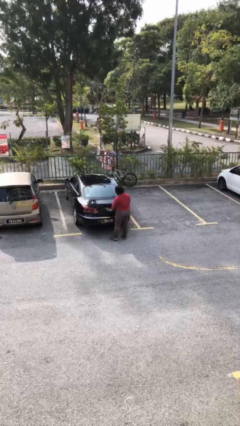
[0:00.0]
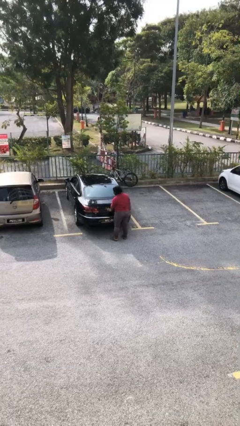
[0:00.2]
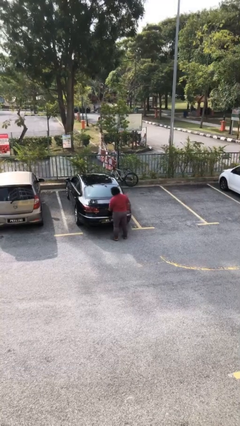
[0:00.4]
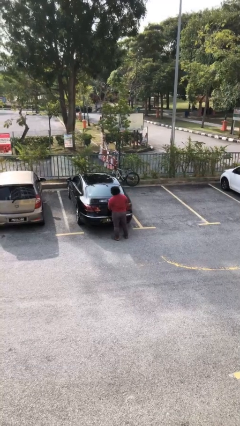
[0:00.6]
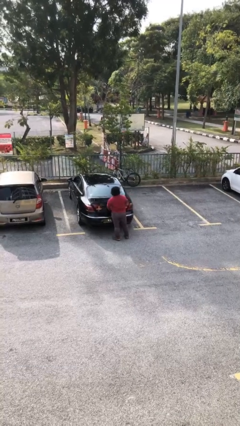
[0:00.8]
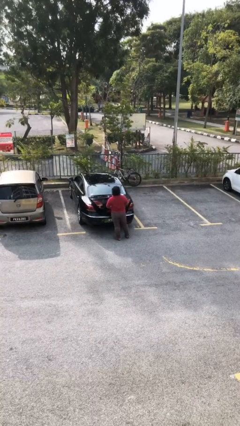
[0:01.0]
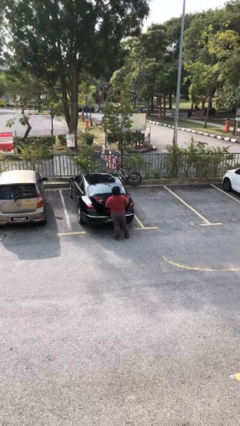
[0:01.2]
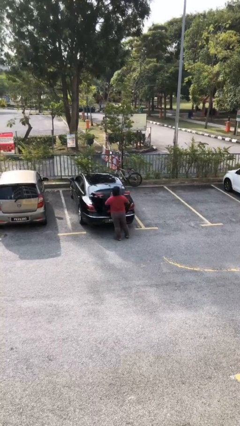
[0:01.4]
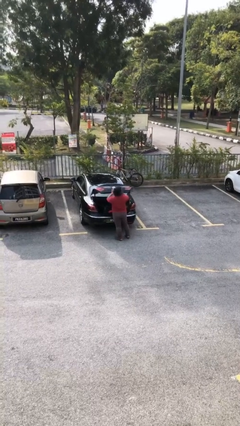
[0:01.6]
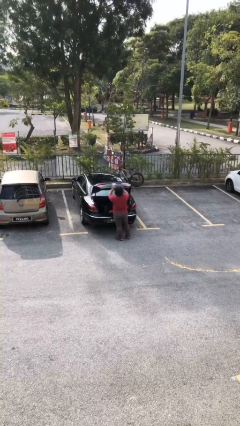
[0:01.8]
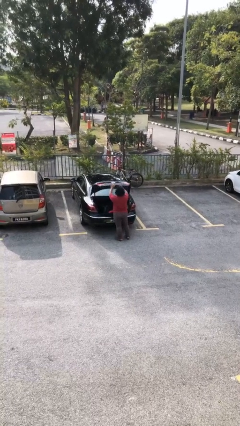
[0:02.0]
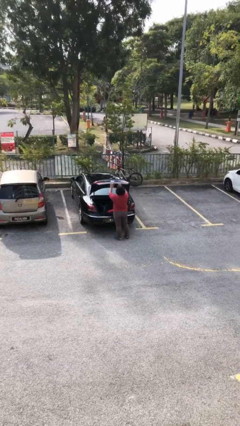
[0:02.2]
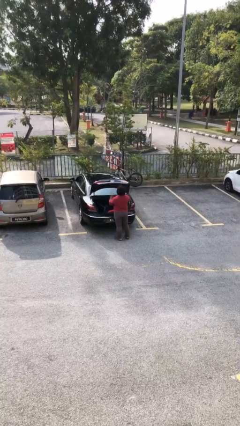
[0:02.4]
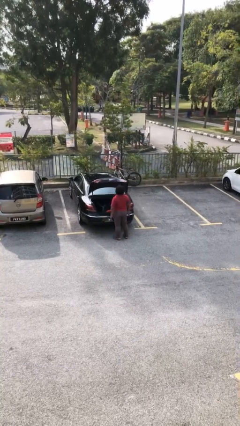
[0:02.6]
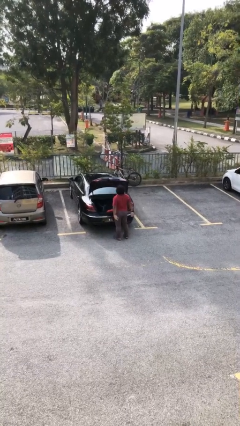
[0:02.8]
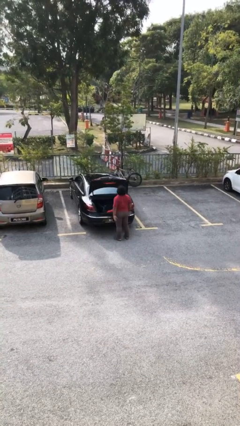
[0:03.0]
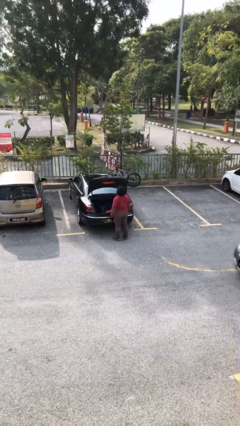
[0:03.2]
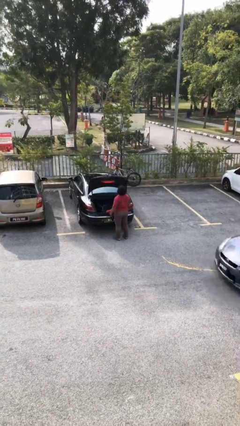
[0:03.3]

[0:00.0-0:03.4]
person opens car trunk

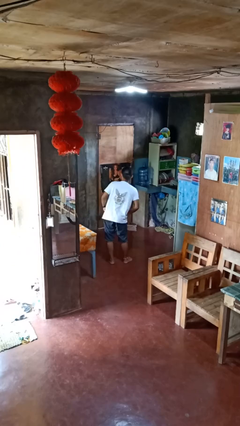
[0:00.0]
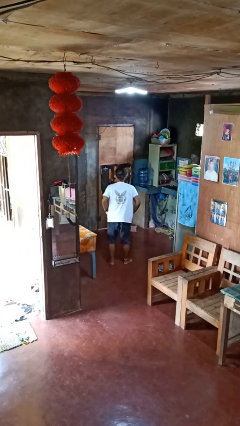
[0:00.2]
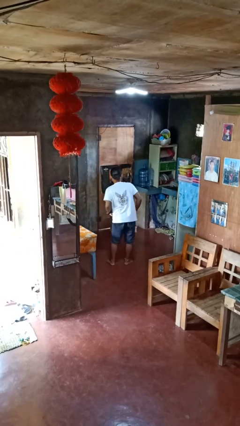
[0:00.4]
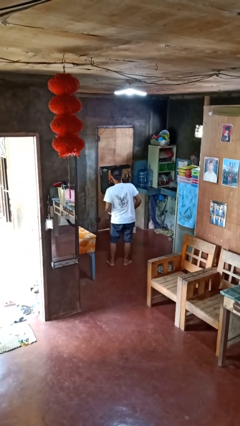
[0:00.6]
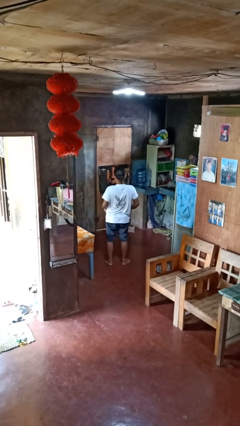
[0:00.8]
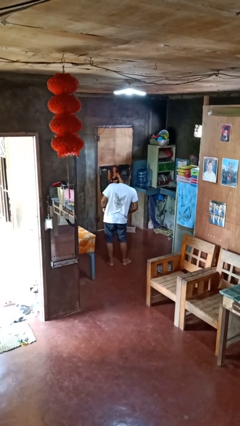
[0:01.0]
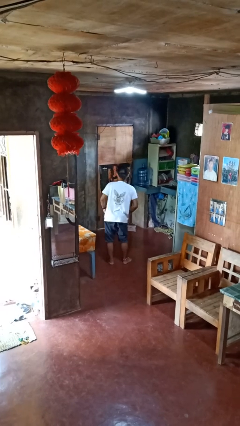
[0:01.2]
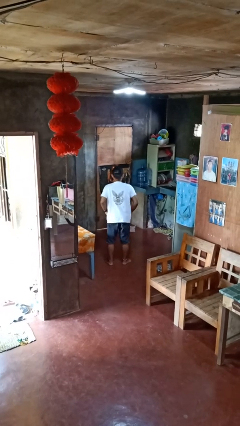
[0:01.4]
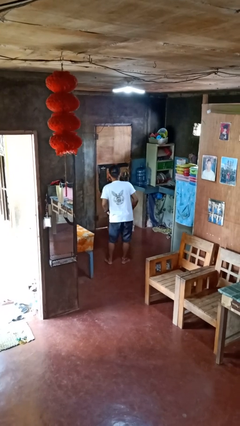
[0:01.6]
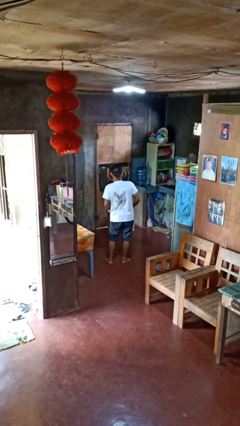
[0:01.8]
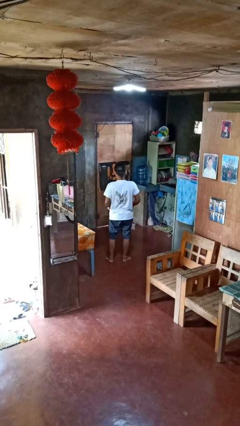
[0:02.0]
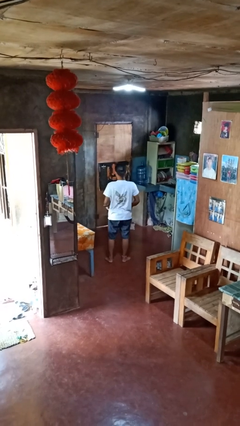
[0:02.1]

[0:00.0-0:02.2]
person wiggles hips

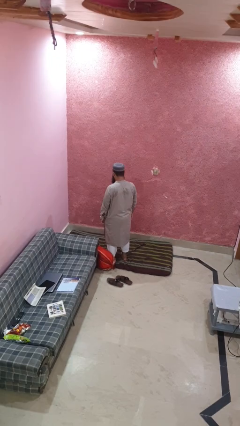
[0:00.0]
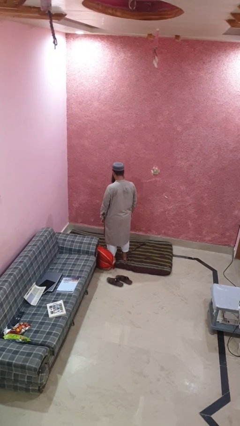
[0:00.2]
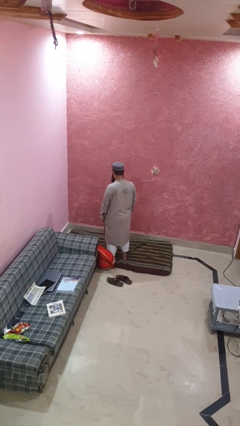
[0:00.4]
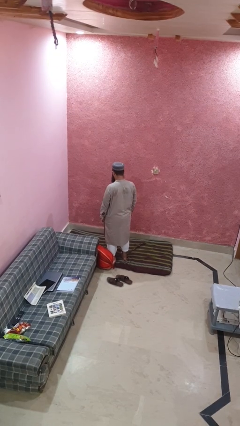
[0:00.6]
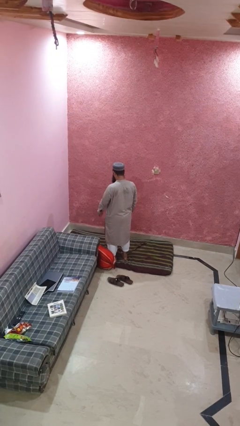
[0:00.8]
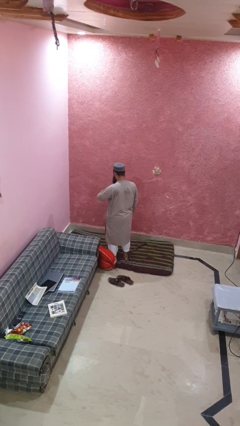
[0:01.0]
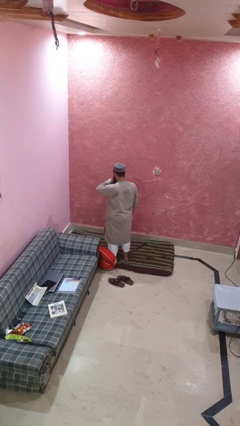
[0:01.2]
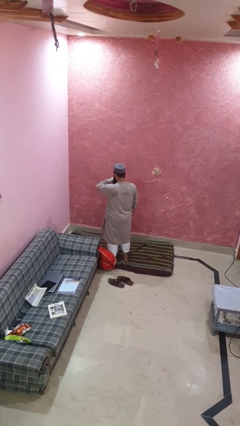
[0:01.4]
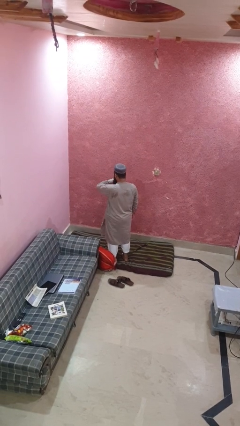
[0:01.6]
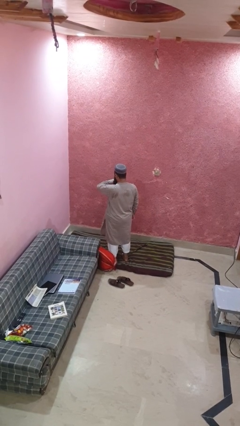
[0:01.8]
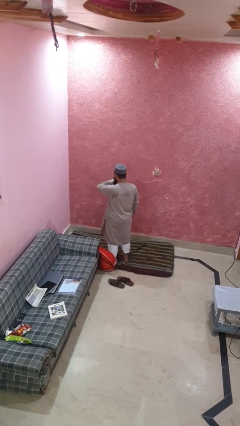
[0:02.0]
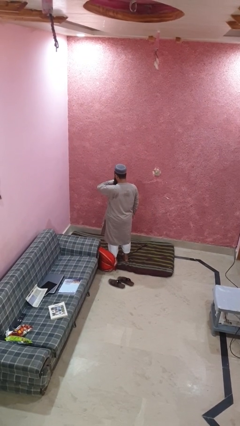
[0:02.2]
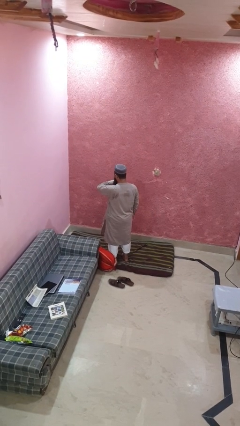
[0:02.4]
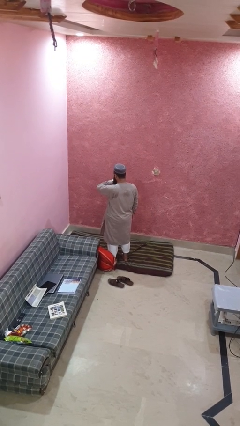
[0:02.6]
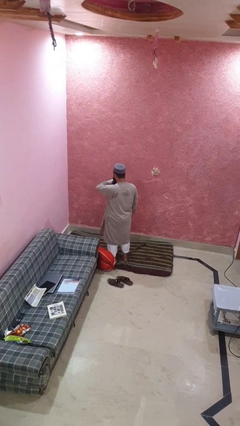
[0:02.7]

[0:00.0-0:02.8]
person looks at wristwatch

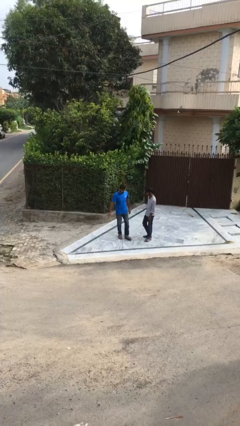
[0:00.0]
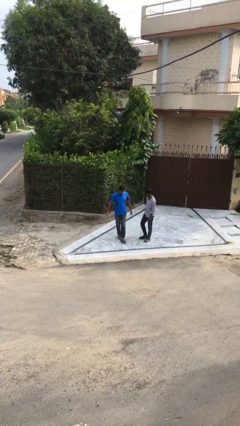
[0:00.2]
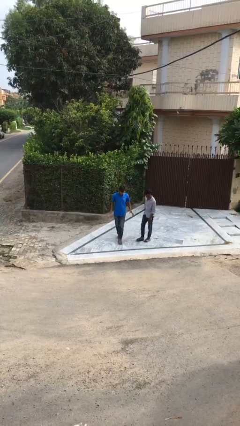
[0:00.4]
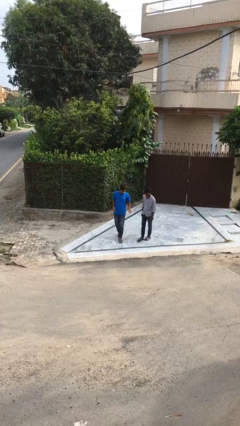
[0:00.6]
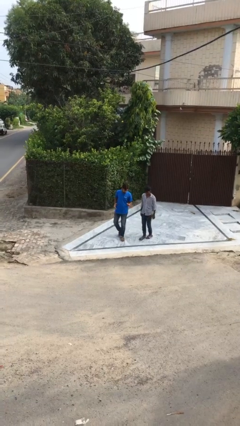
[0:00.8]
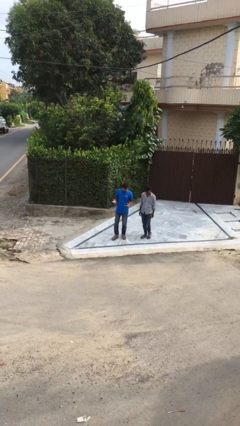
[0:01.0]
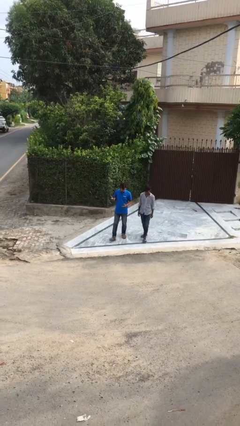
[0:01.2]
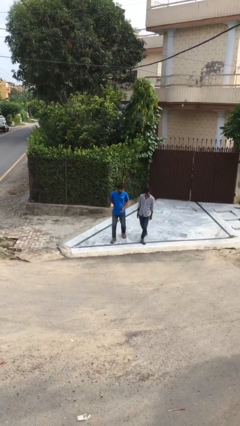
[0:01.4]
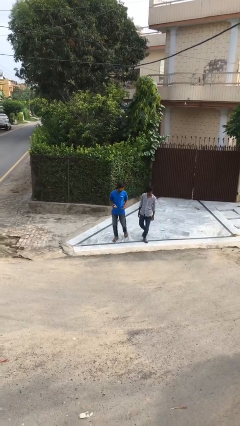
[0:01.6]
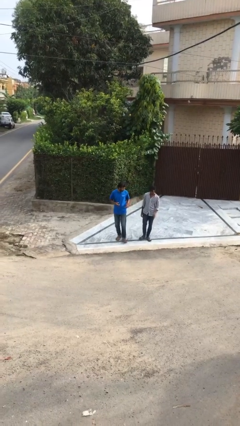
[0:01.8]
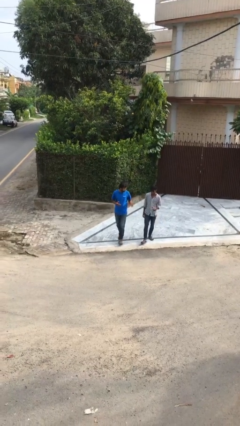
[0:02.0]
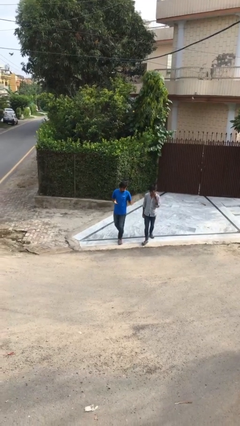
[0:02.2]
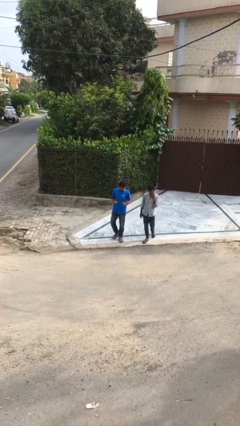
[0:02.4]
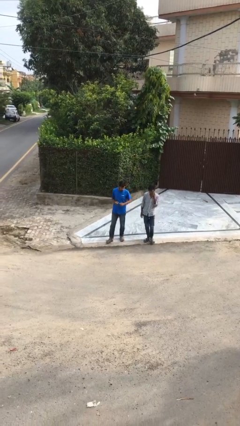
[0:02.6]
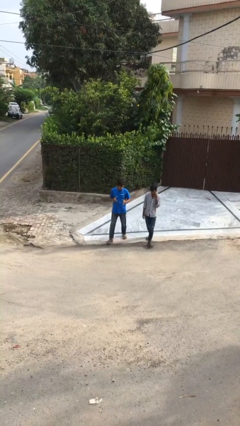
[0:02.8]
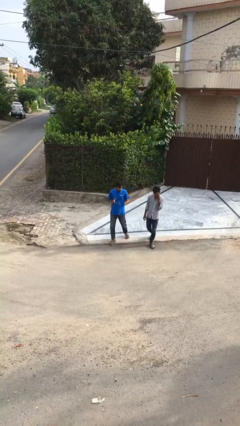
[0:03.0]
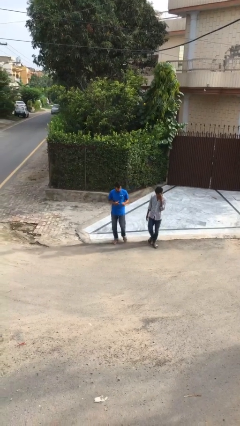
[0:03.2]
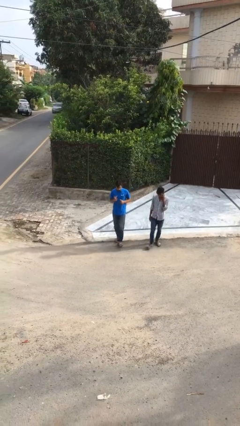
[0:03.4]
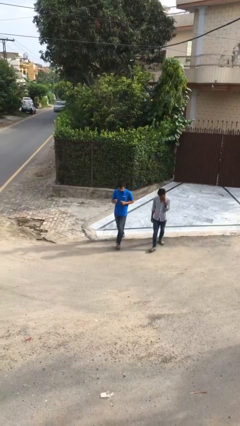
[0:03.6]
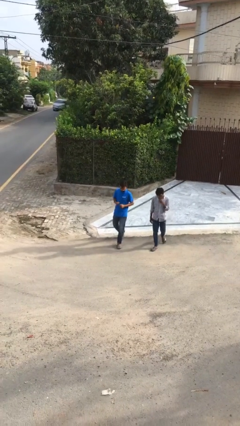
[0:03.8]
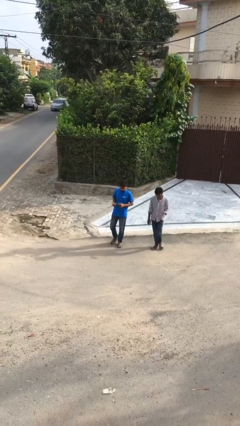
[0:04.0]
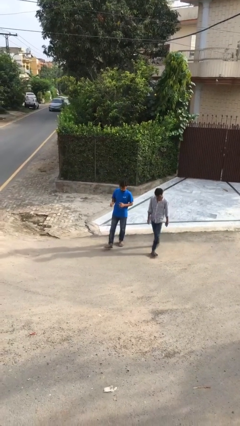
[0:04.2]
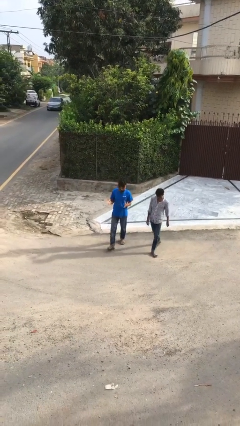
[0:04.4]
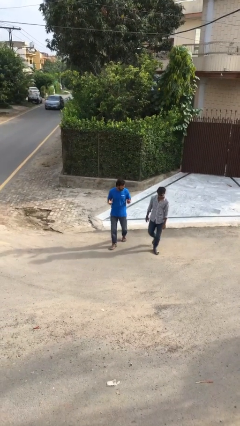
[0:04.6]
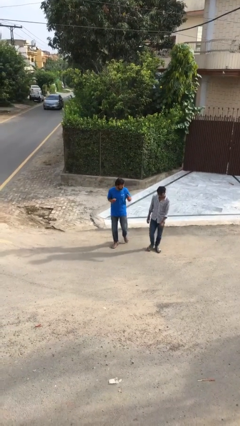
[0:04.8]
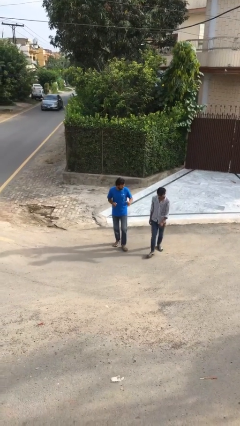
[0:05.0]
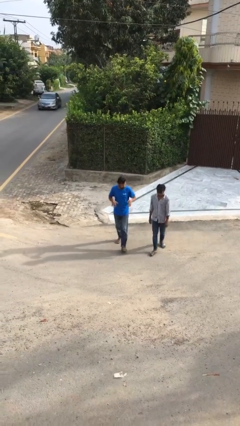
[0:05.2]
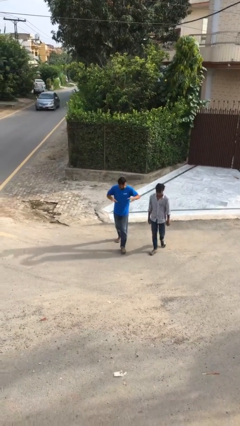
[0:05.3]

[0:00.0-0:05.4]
person talks to person

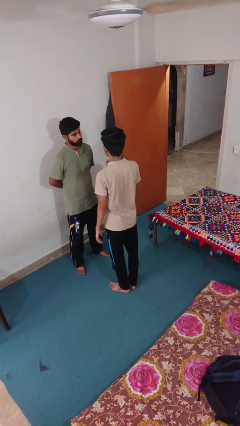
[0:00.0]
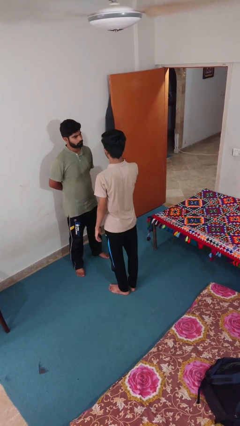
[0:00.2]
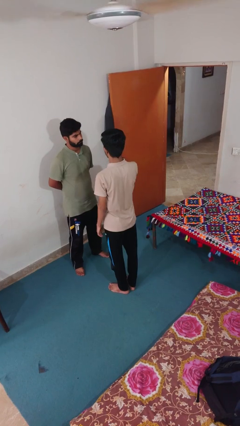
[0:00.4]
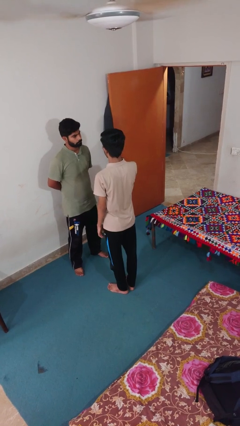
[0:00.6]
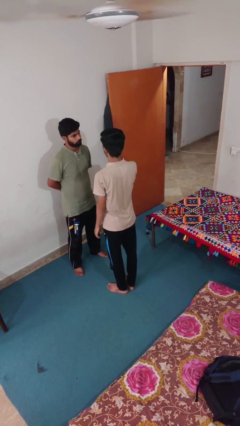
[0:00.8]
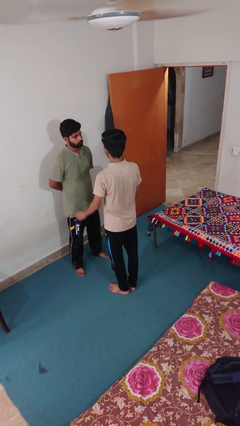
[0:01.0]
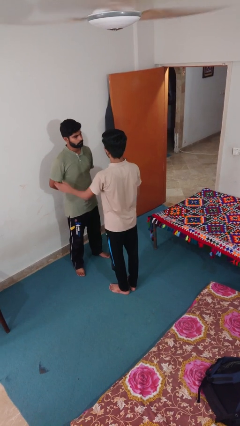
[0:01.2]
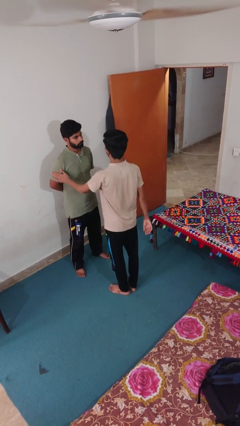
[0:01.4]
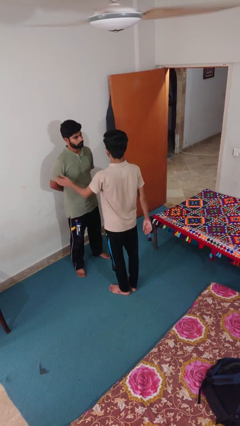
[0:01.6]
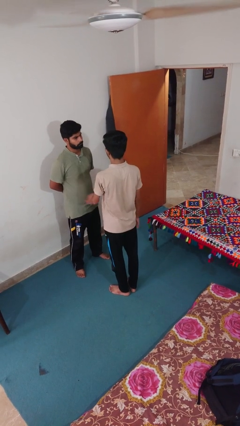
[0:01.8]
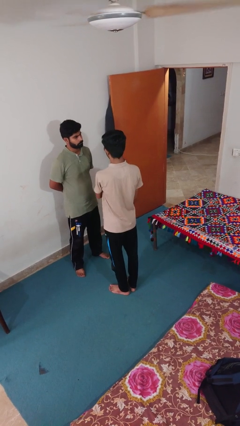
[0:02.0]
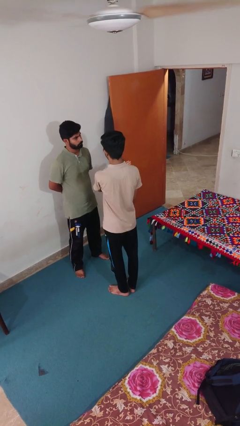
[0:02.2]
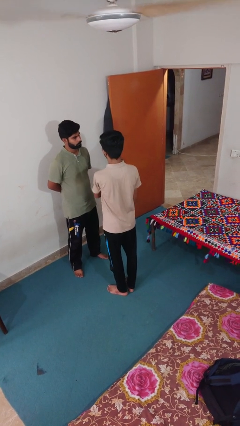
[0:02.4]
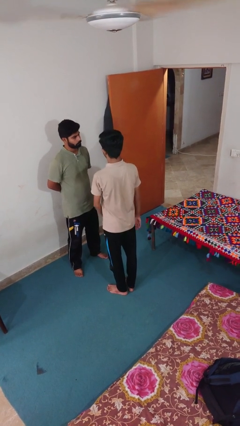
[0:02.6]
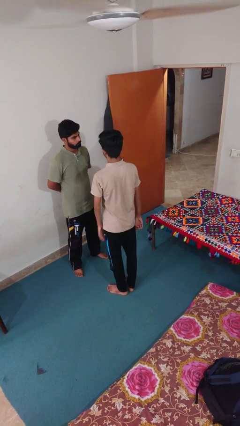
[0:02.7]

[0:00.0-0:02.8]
person shoves person

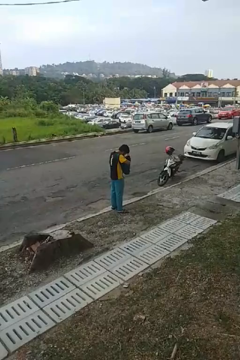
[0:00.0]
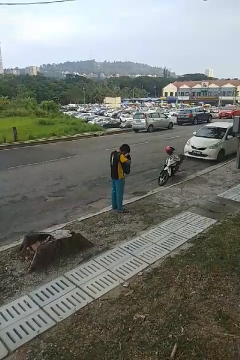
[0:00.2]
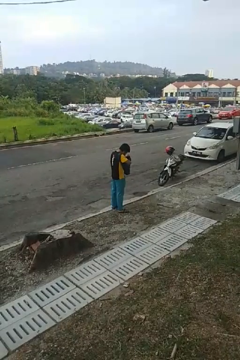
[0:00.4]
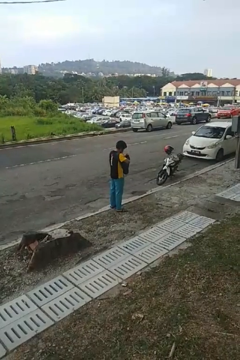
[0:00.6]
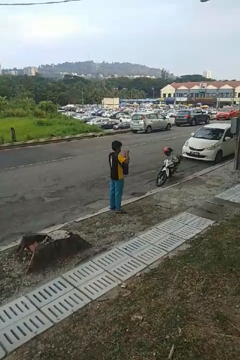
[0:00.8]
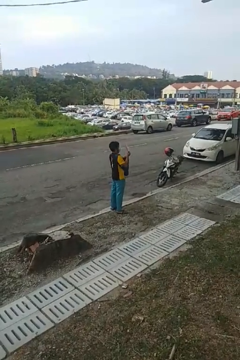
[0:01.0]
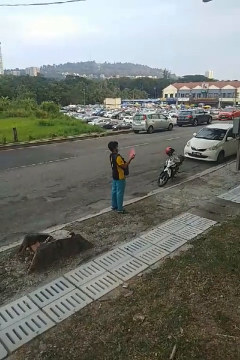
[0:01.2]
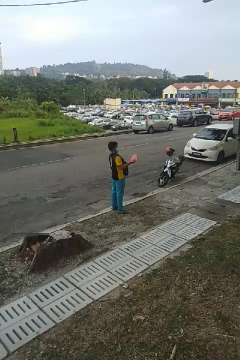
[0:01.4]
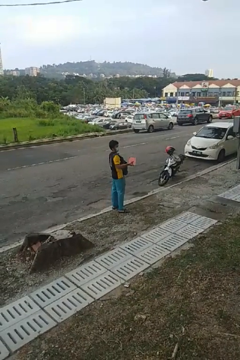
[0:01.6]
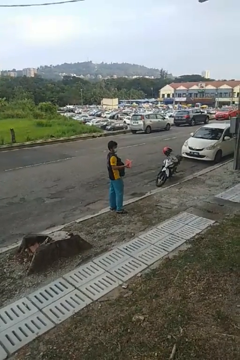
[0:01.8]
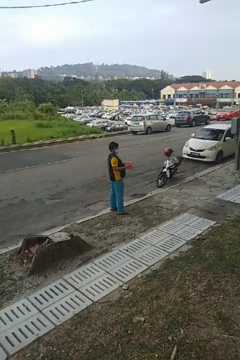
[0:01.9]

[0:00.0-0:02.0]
person takes object from backpack
